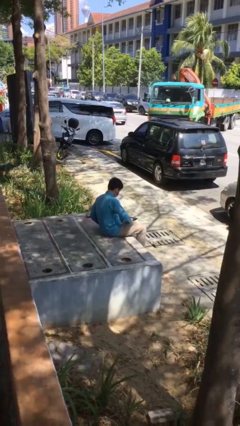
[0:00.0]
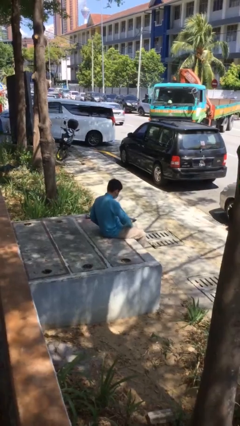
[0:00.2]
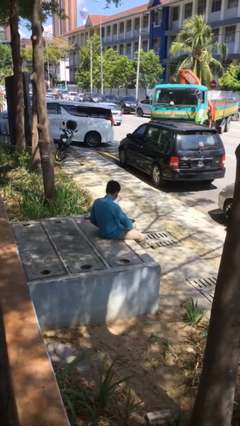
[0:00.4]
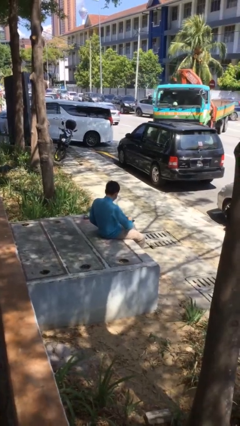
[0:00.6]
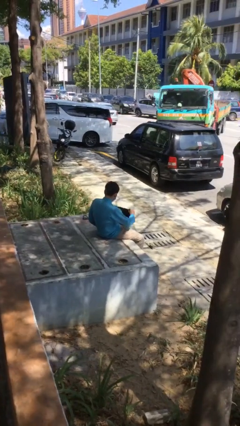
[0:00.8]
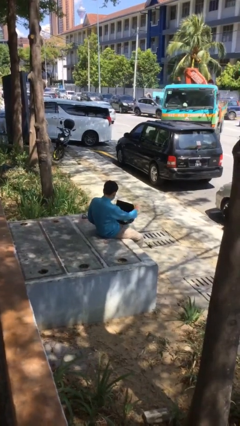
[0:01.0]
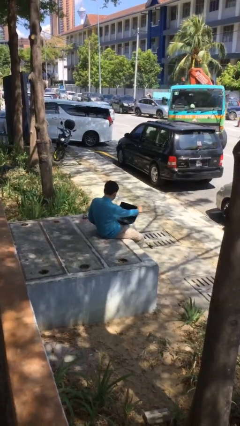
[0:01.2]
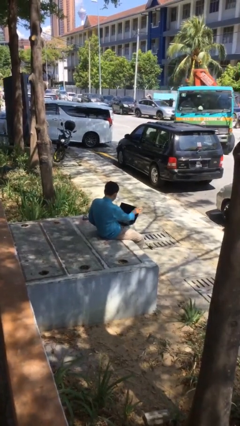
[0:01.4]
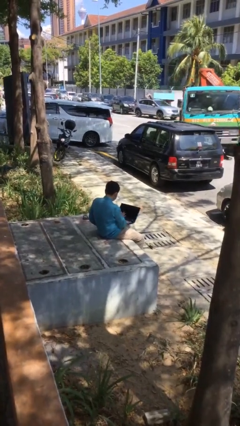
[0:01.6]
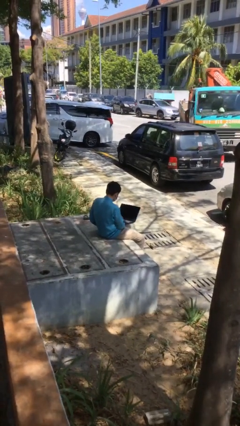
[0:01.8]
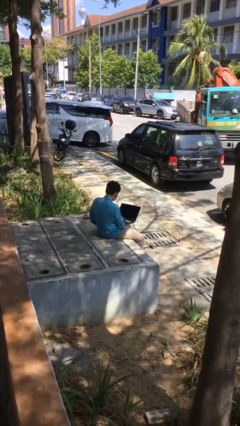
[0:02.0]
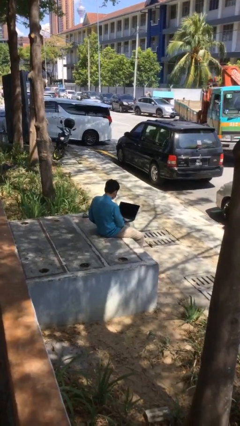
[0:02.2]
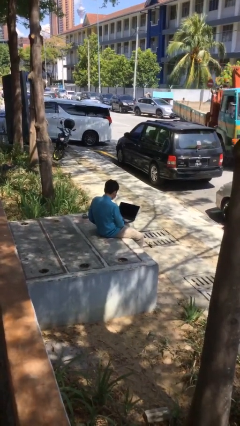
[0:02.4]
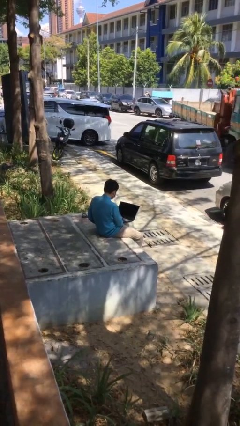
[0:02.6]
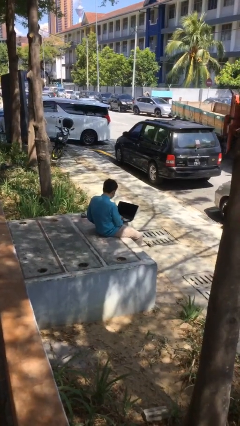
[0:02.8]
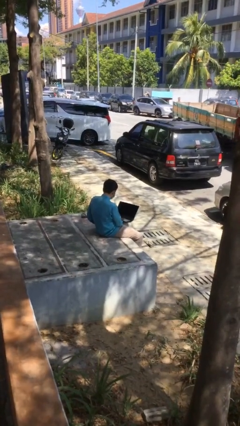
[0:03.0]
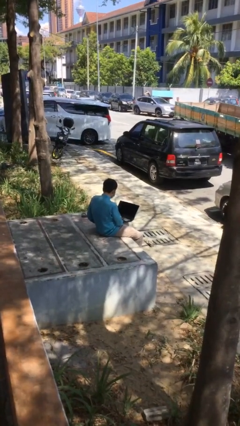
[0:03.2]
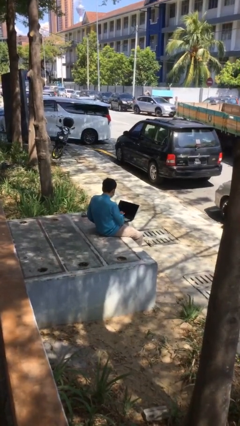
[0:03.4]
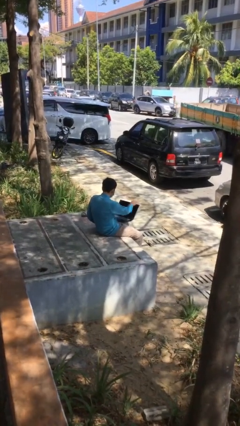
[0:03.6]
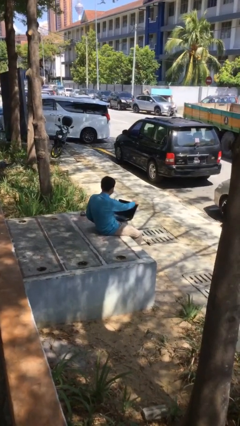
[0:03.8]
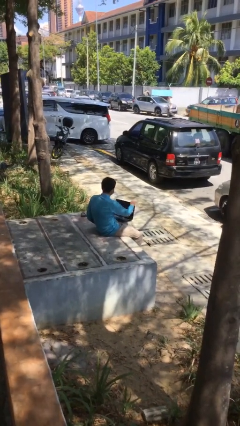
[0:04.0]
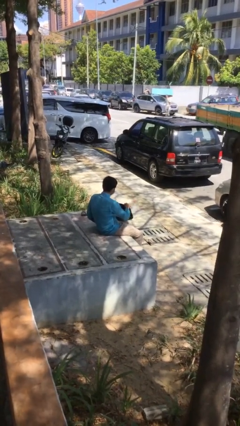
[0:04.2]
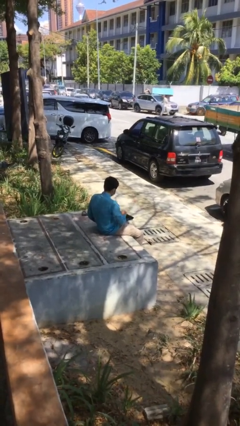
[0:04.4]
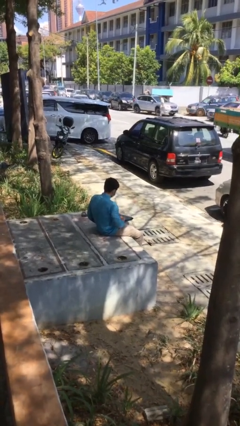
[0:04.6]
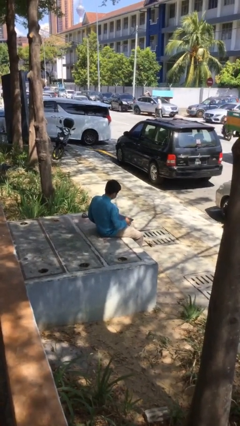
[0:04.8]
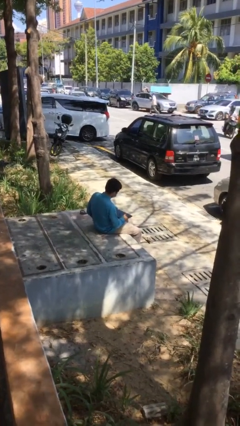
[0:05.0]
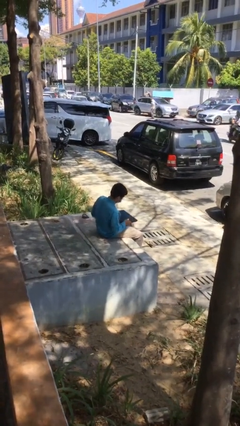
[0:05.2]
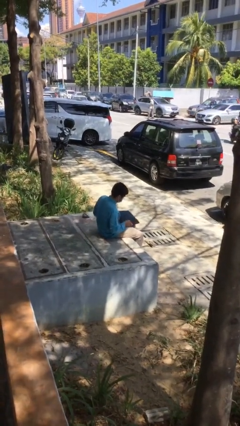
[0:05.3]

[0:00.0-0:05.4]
person interacts with laptop

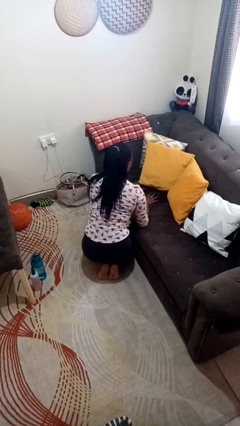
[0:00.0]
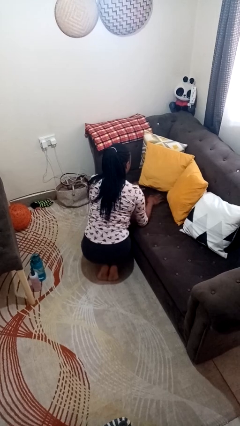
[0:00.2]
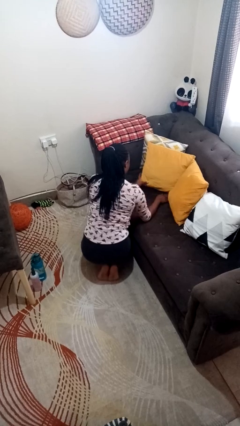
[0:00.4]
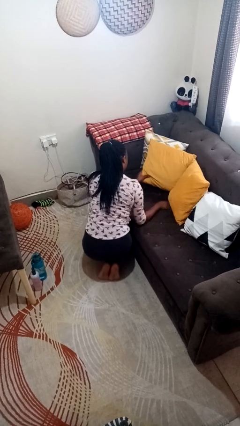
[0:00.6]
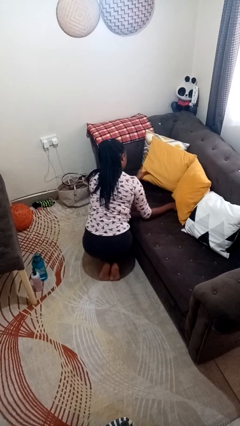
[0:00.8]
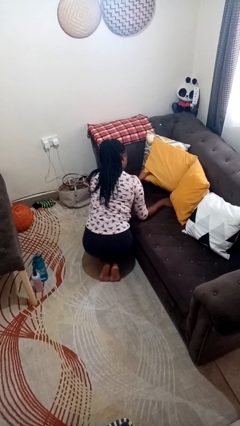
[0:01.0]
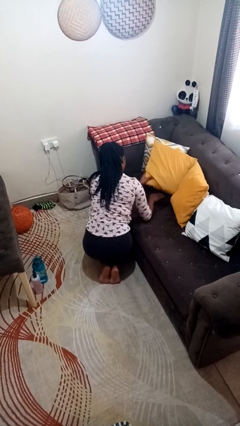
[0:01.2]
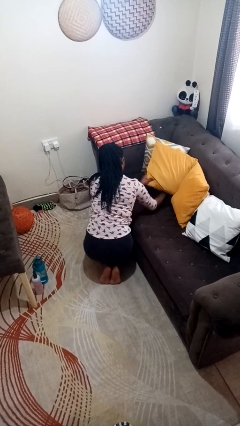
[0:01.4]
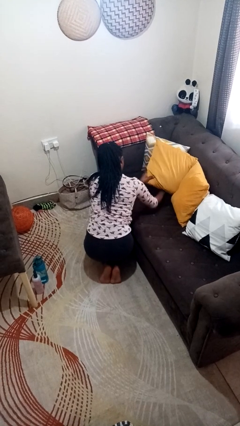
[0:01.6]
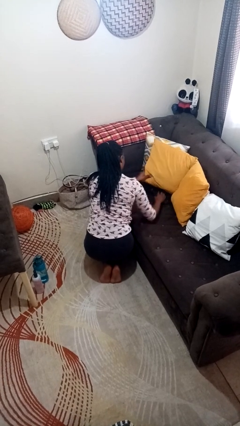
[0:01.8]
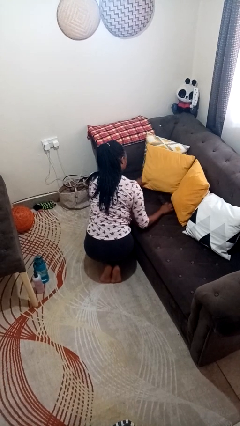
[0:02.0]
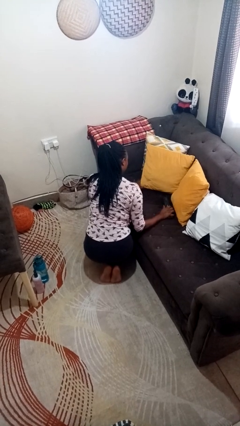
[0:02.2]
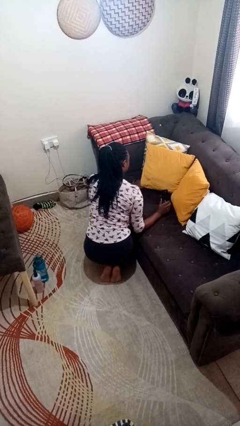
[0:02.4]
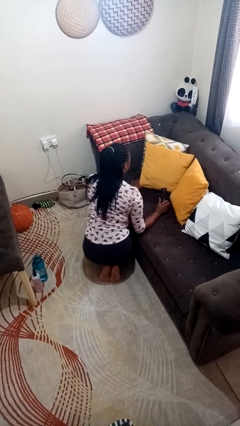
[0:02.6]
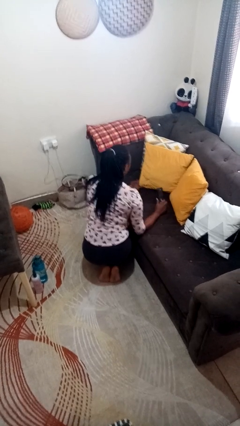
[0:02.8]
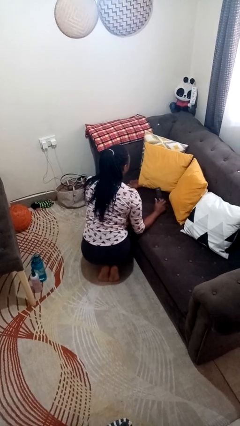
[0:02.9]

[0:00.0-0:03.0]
person searches in couch

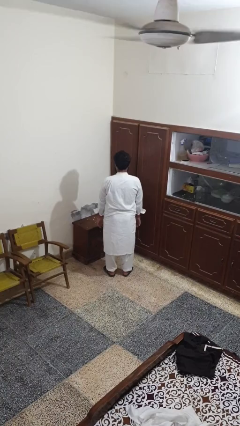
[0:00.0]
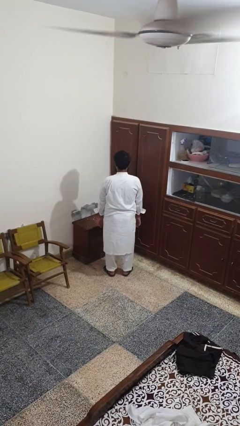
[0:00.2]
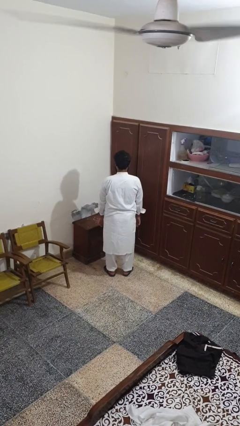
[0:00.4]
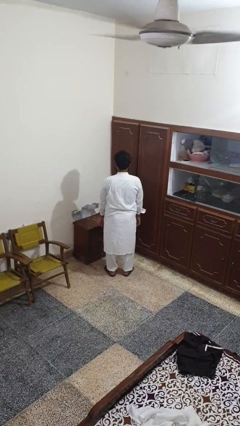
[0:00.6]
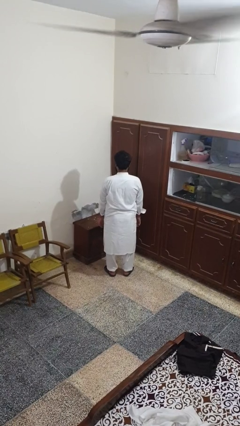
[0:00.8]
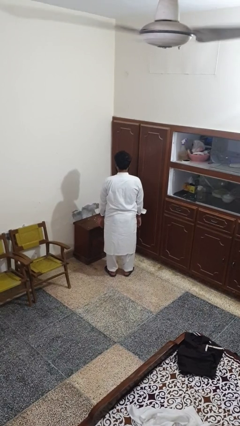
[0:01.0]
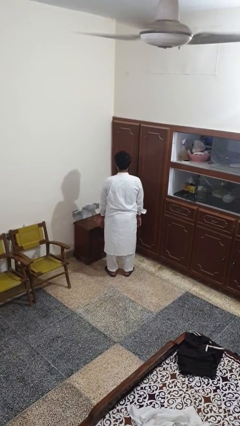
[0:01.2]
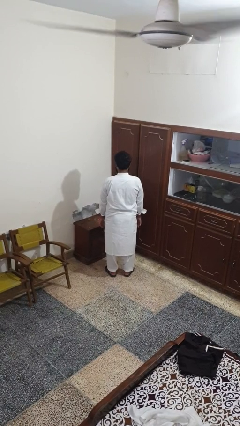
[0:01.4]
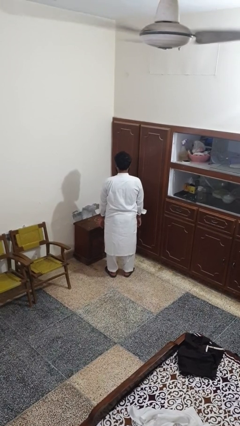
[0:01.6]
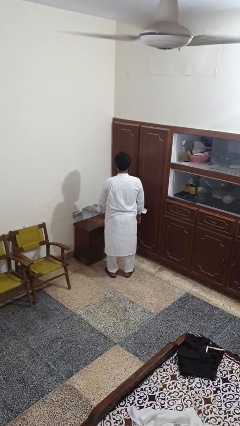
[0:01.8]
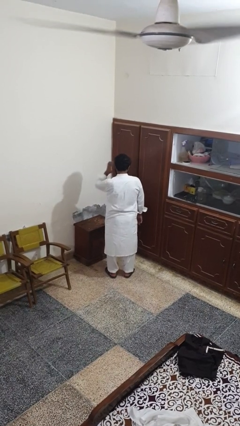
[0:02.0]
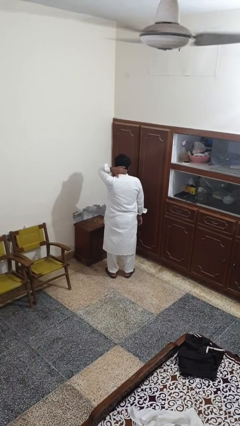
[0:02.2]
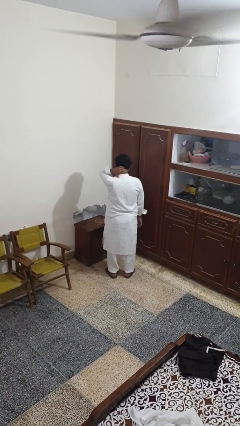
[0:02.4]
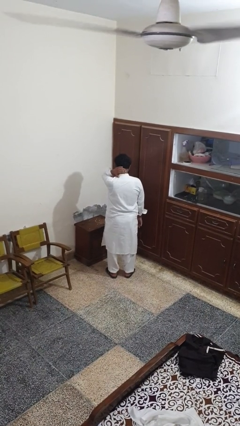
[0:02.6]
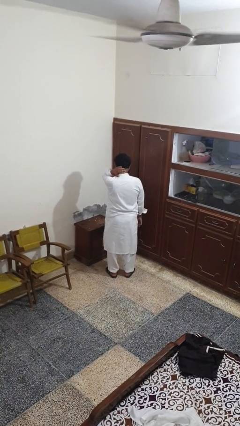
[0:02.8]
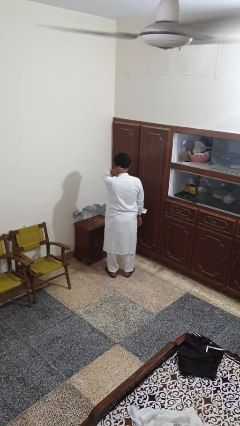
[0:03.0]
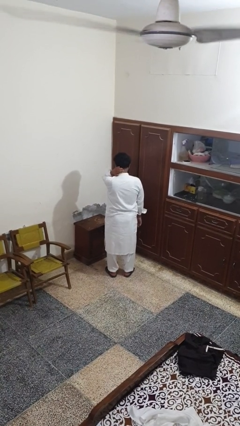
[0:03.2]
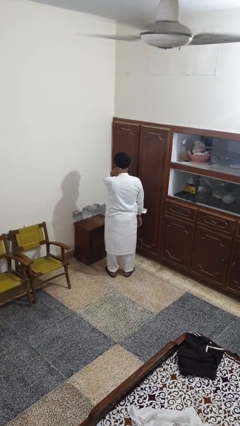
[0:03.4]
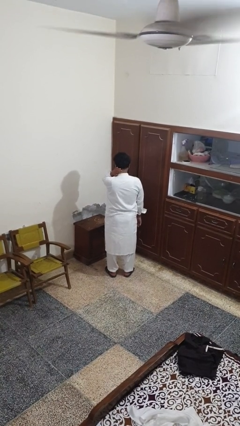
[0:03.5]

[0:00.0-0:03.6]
person rubs neck

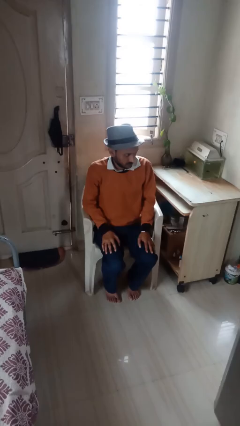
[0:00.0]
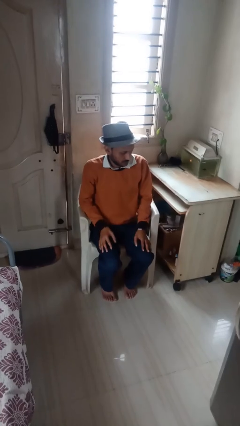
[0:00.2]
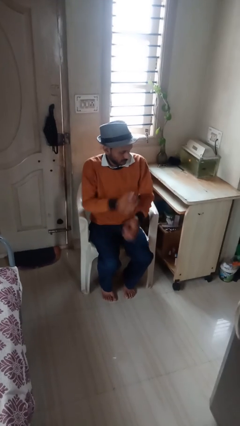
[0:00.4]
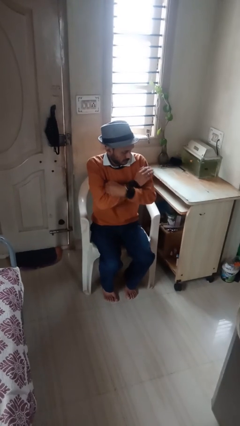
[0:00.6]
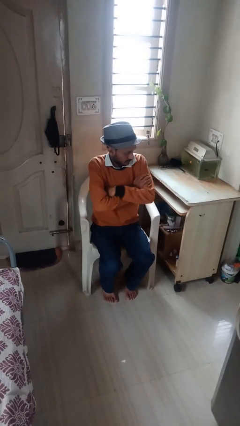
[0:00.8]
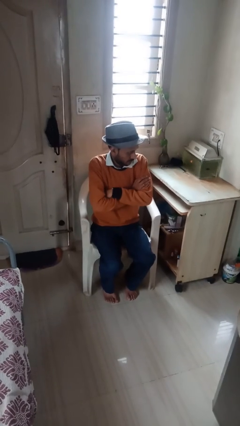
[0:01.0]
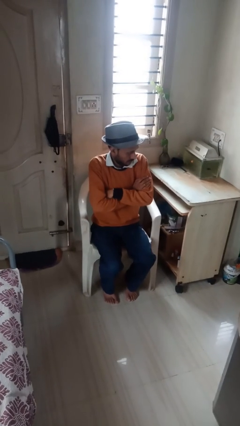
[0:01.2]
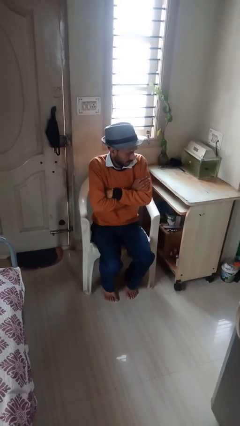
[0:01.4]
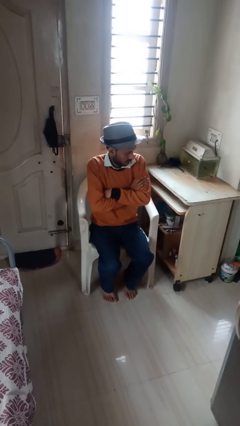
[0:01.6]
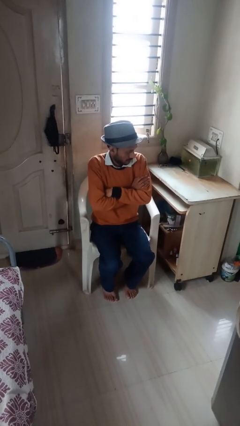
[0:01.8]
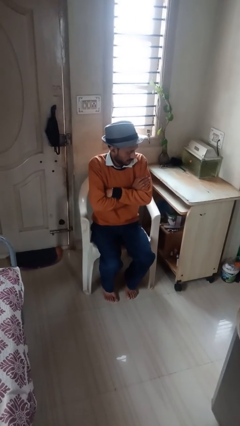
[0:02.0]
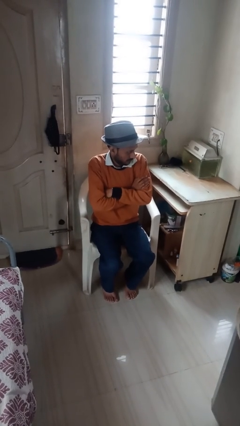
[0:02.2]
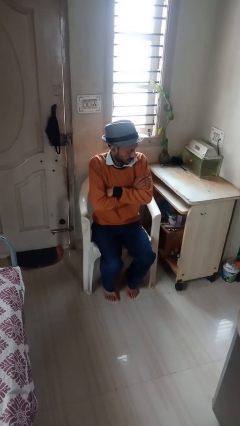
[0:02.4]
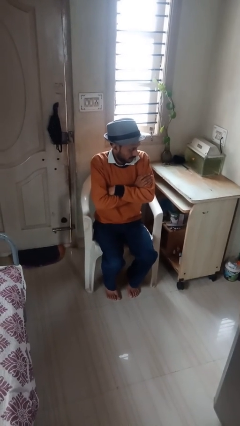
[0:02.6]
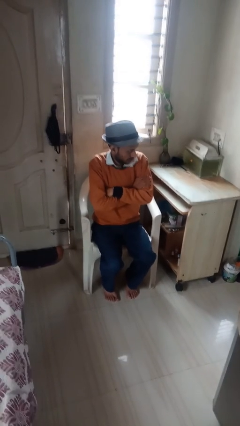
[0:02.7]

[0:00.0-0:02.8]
person crosses arms

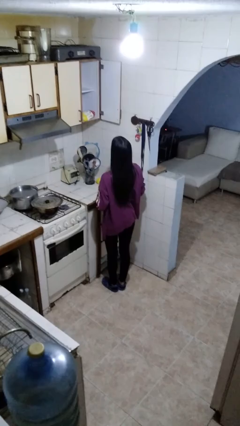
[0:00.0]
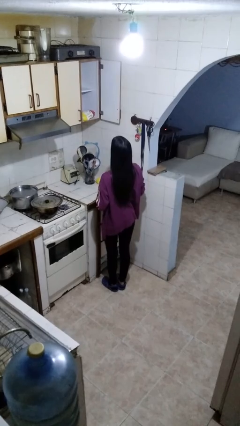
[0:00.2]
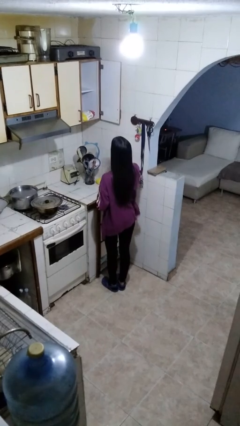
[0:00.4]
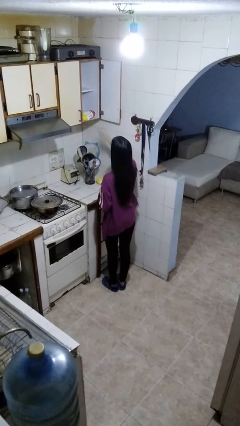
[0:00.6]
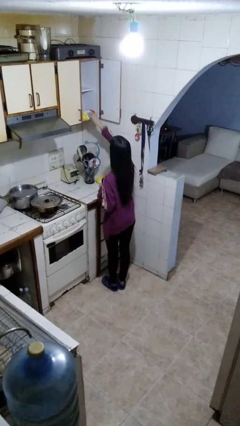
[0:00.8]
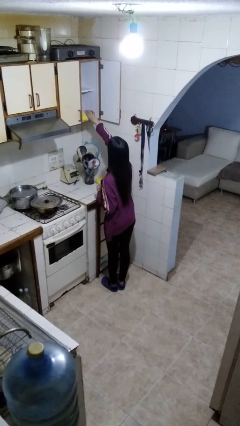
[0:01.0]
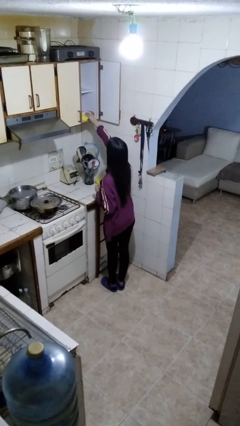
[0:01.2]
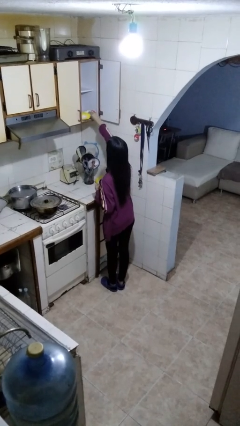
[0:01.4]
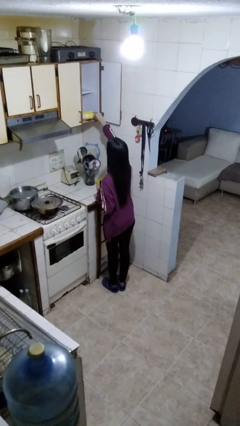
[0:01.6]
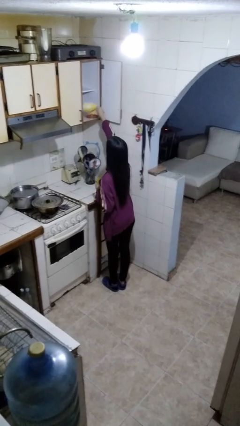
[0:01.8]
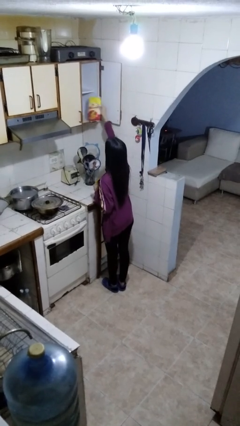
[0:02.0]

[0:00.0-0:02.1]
person puts down object into cabinet

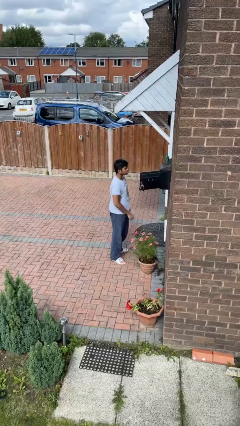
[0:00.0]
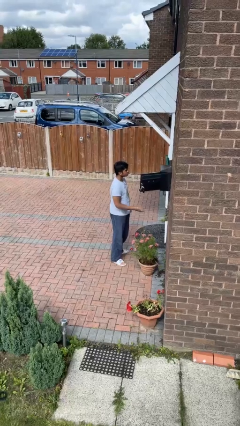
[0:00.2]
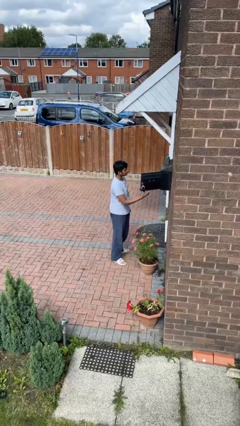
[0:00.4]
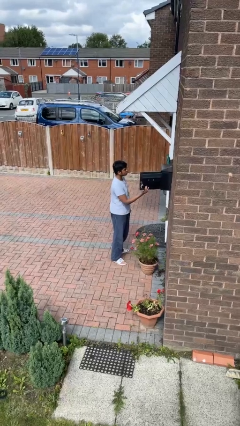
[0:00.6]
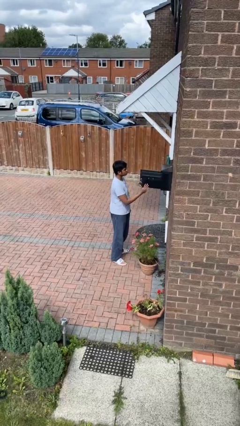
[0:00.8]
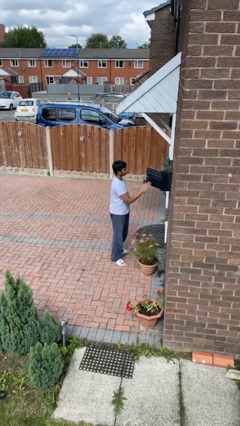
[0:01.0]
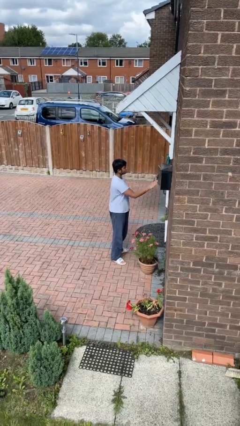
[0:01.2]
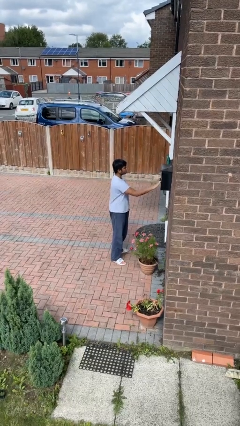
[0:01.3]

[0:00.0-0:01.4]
person closes mailbox
